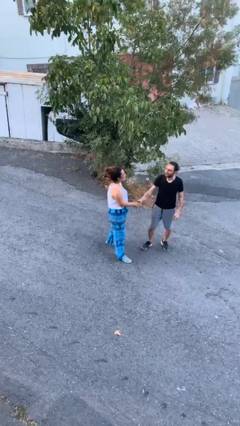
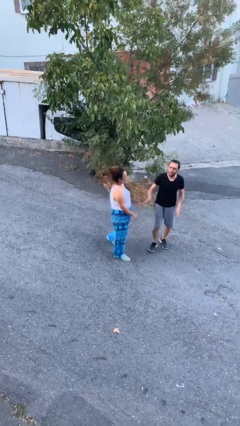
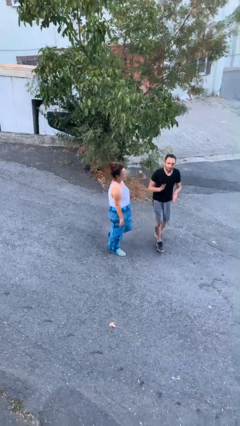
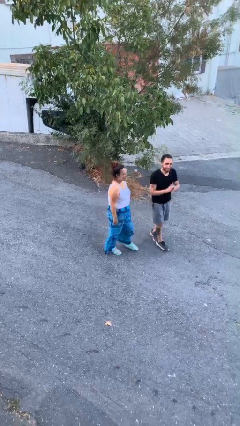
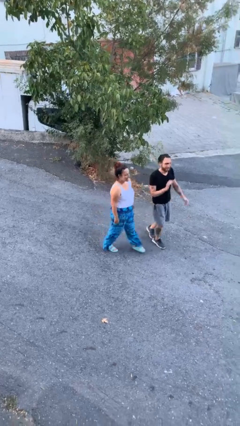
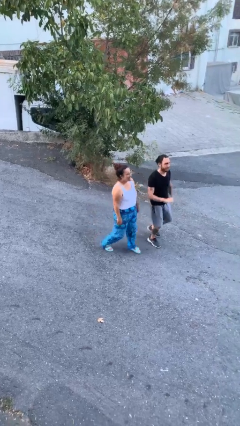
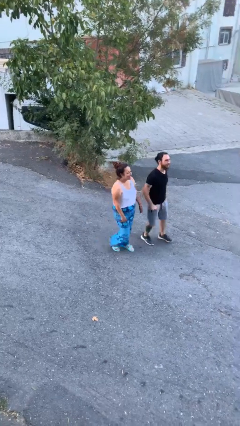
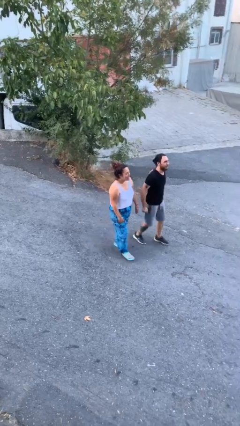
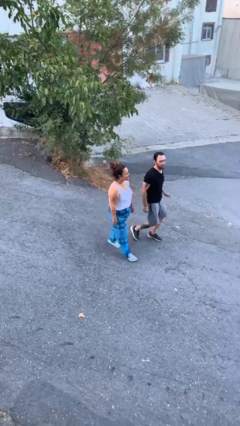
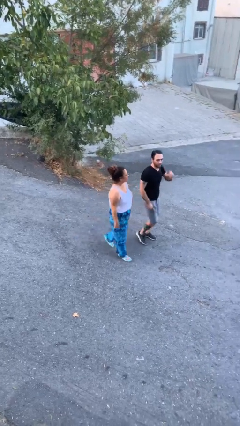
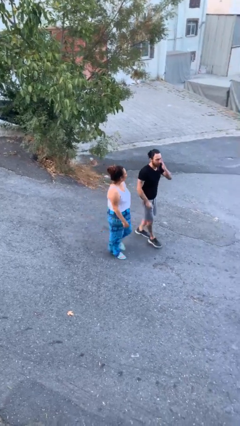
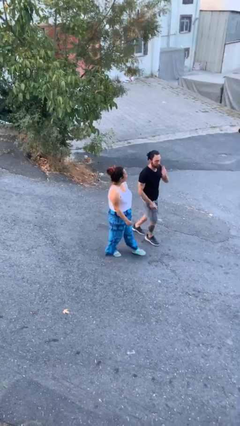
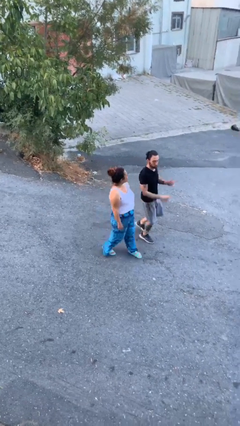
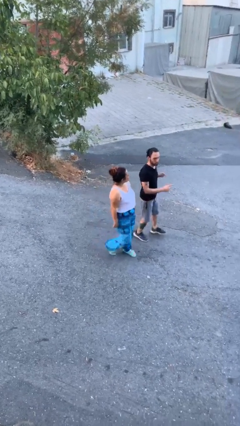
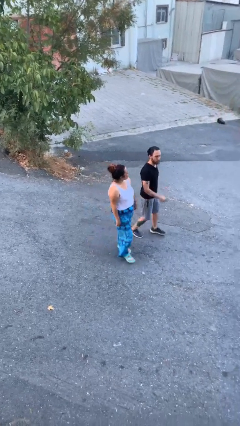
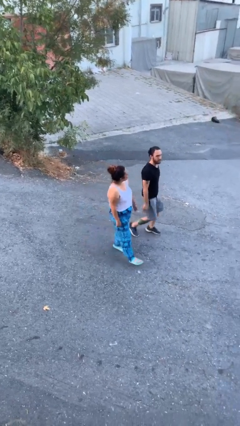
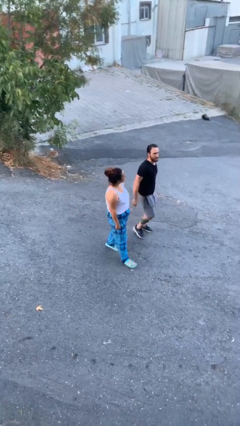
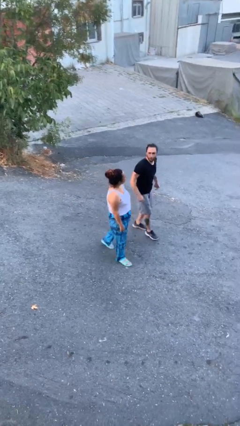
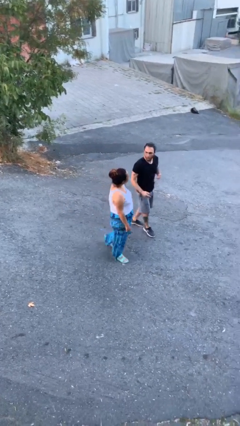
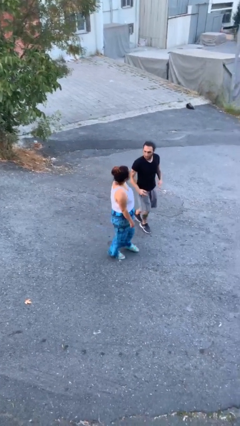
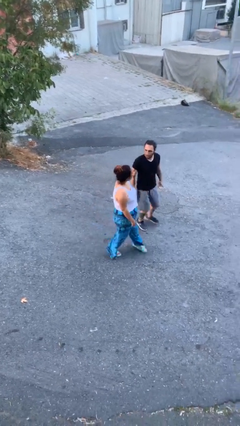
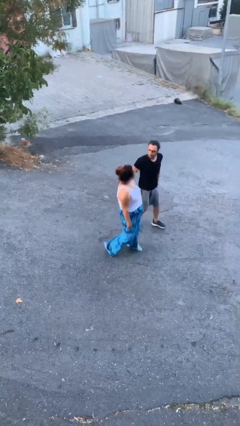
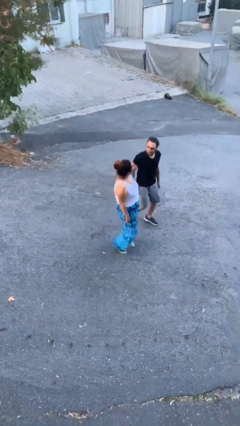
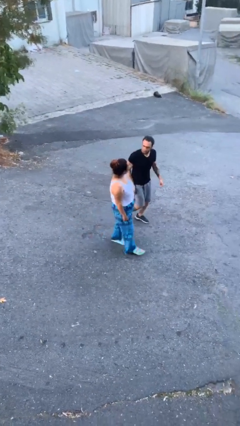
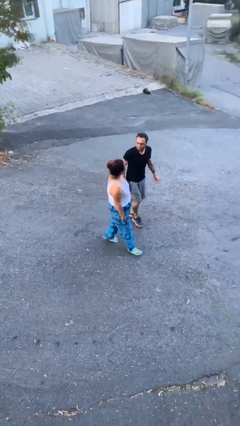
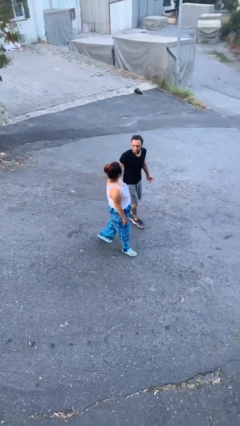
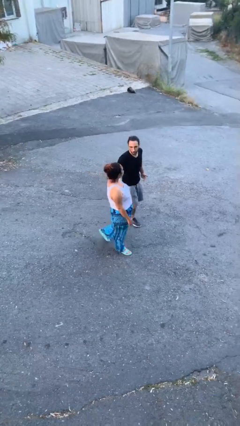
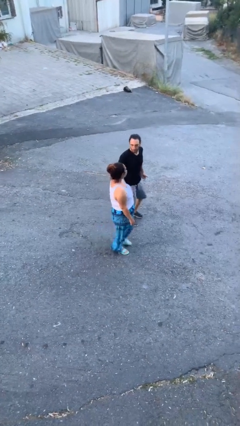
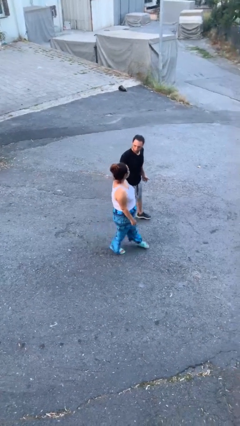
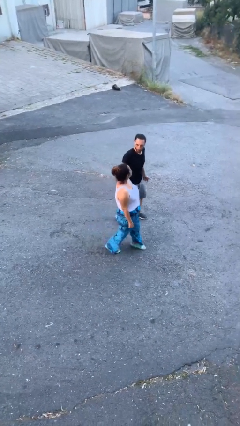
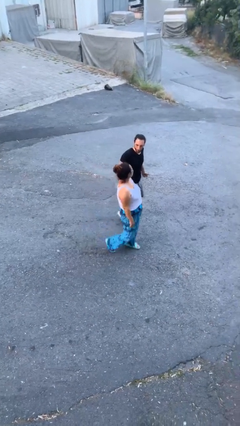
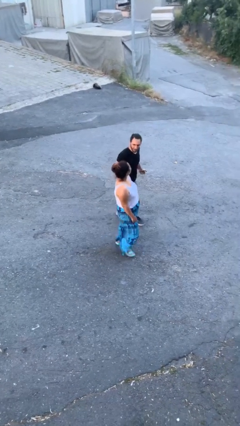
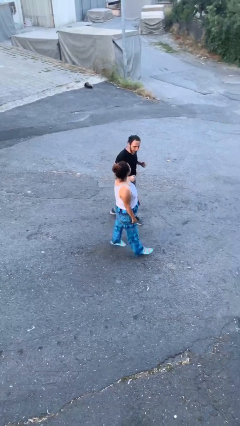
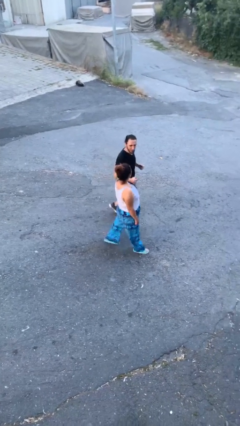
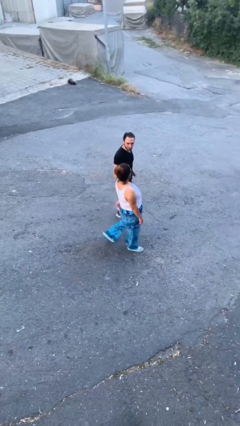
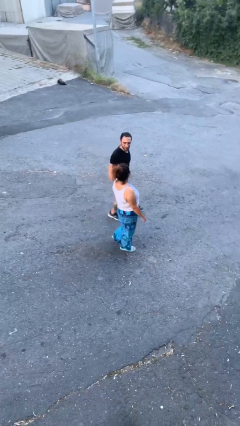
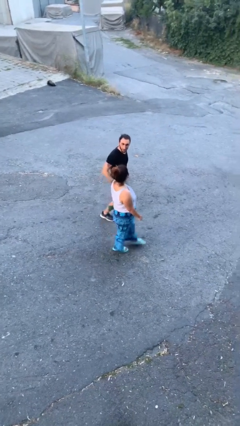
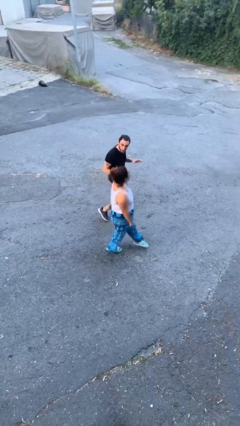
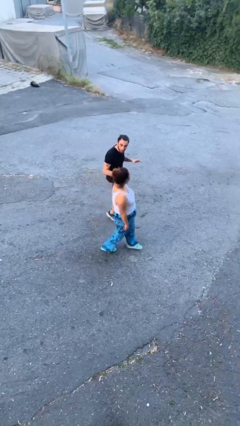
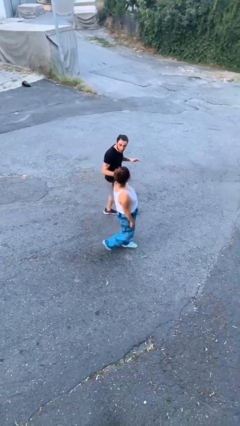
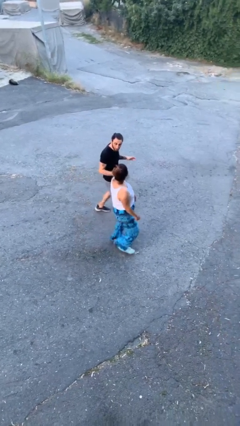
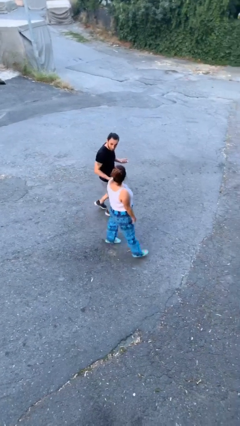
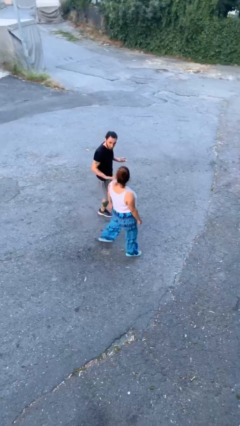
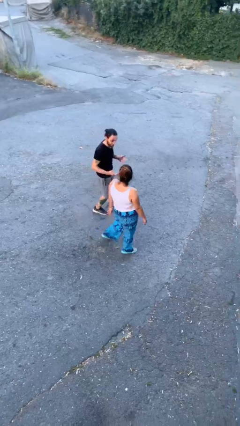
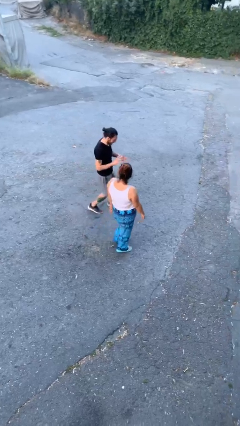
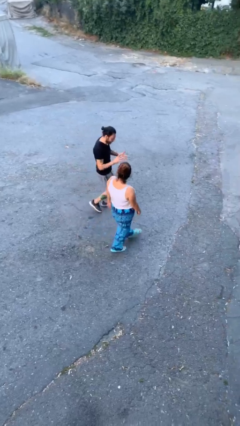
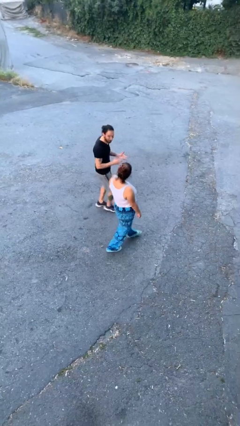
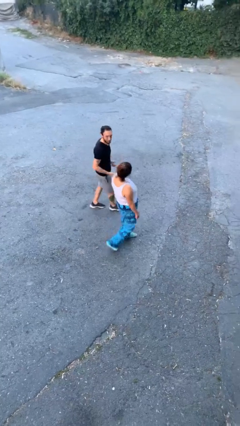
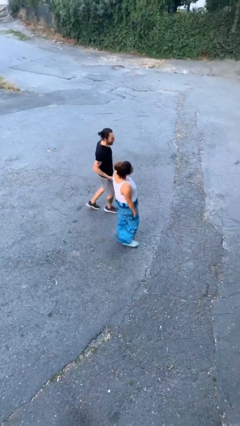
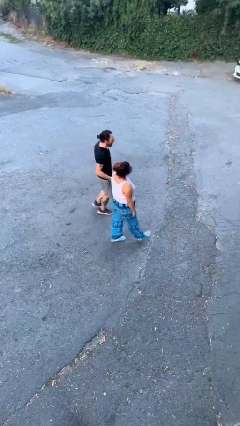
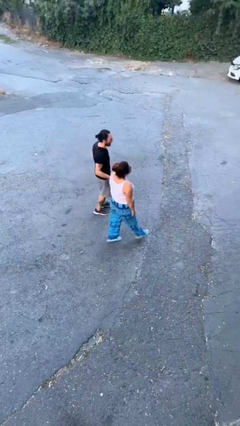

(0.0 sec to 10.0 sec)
person talks to person

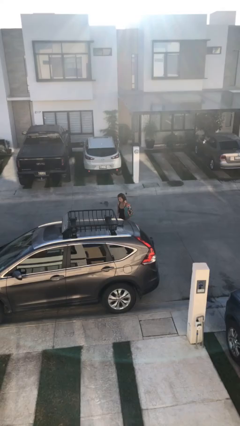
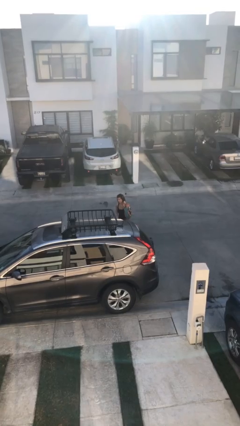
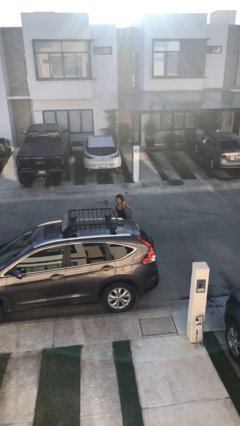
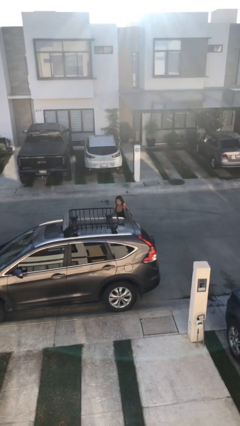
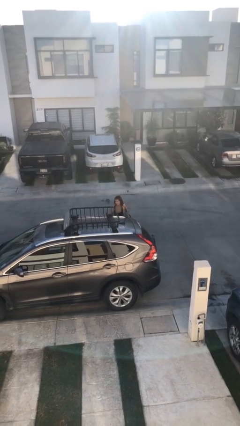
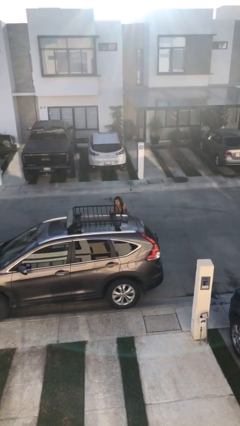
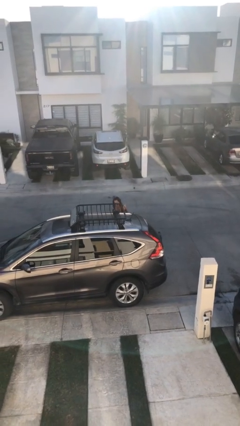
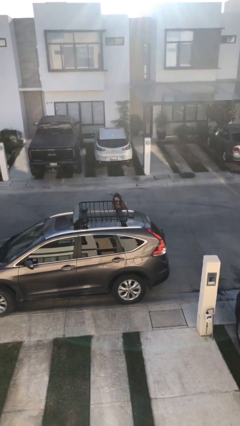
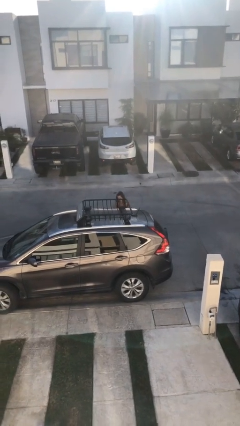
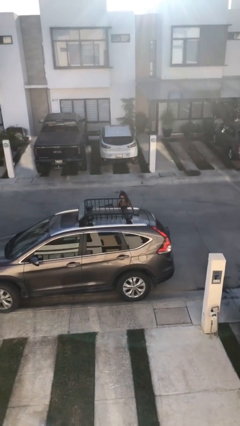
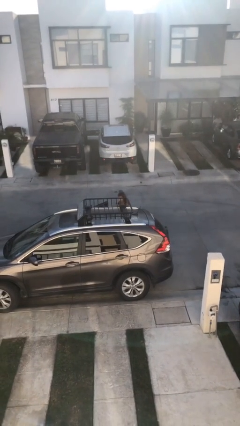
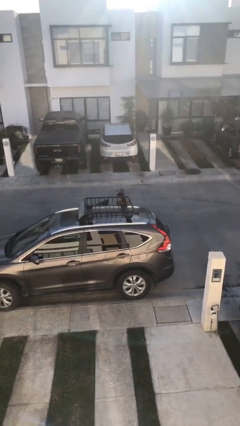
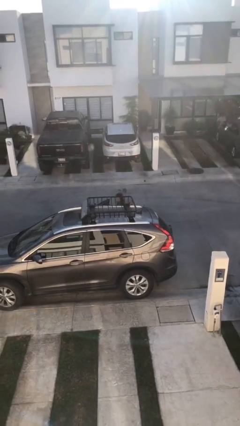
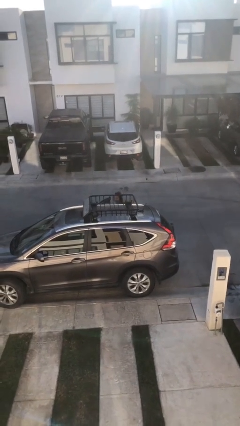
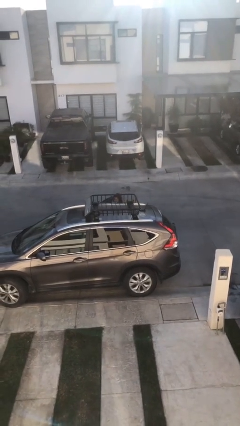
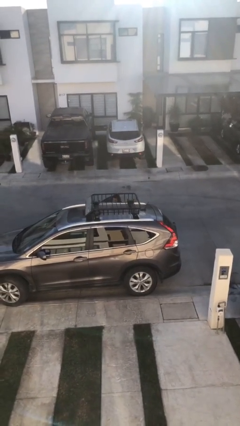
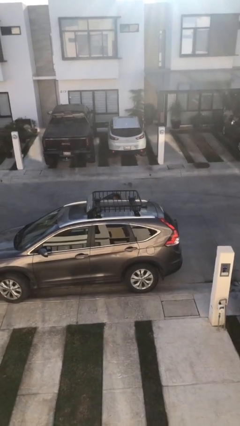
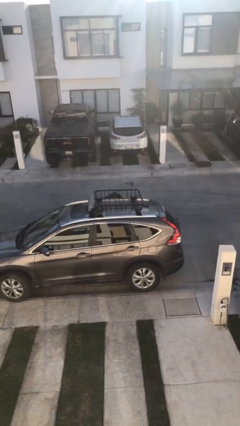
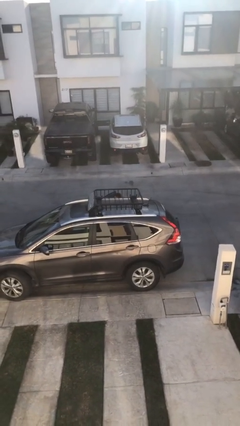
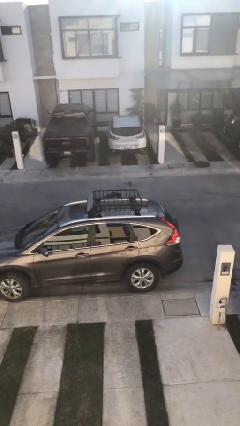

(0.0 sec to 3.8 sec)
person loads car

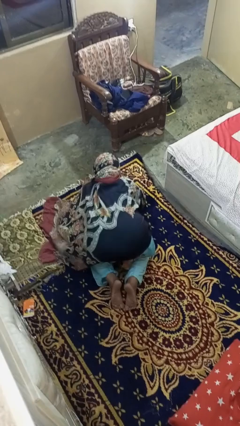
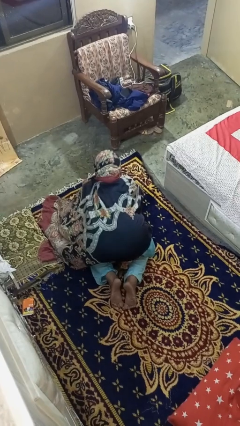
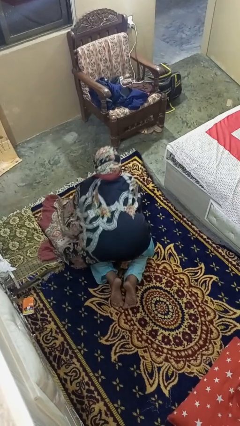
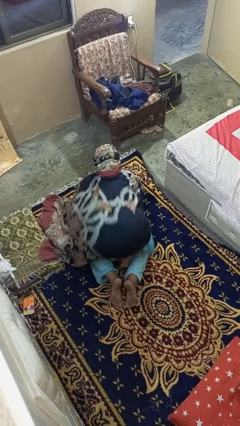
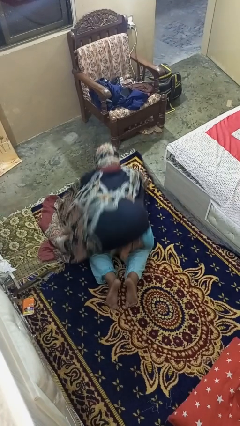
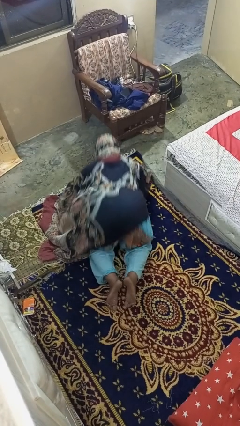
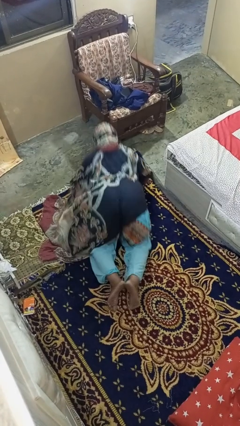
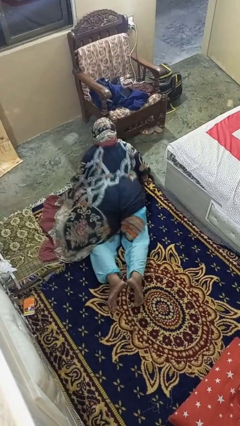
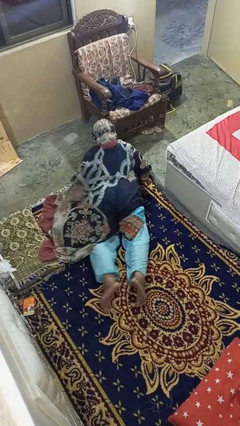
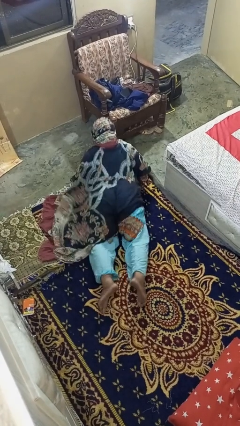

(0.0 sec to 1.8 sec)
person exercises with pushup

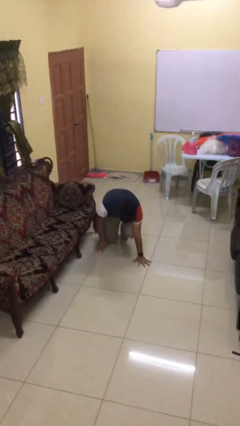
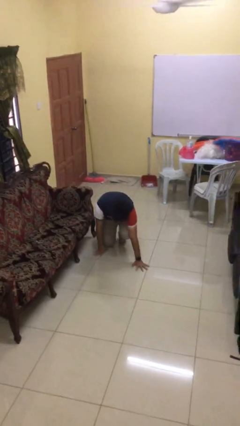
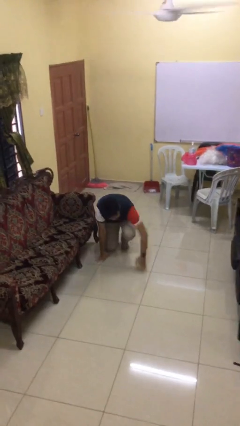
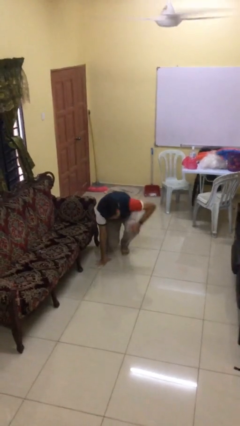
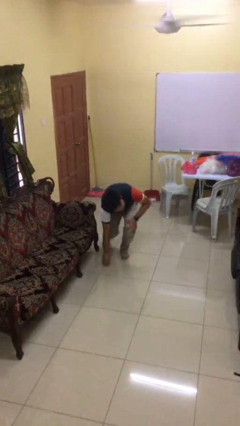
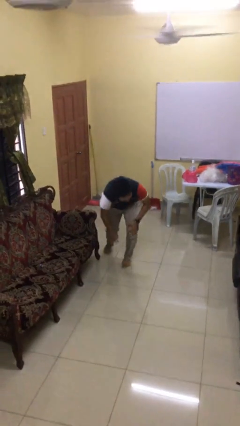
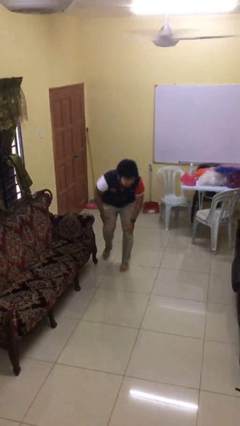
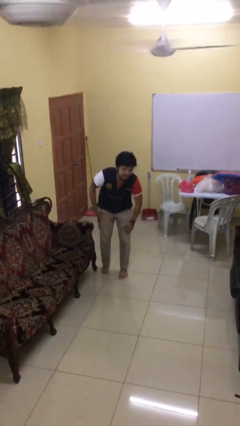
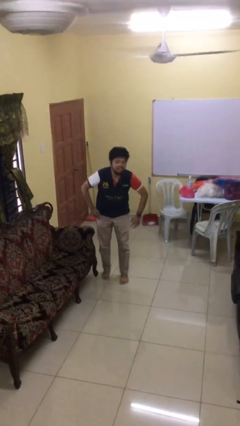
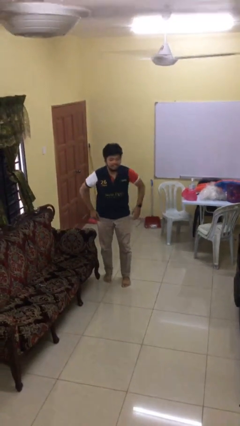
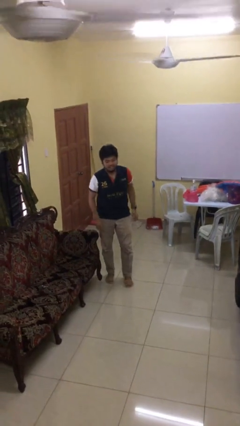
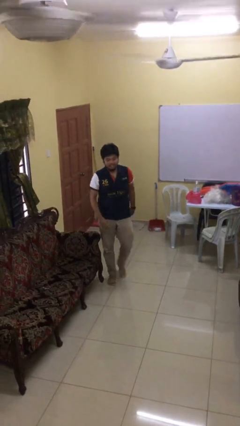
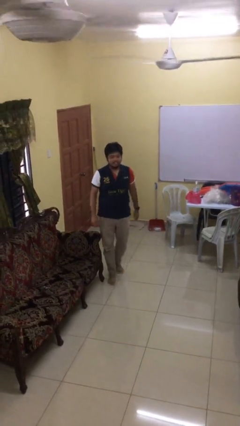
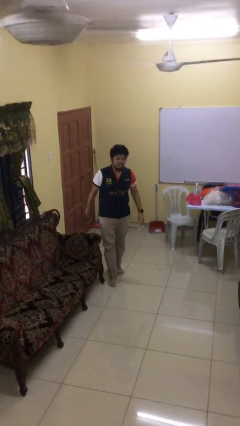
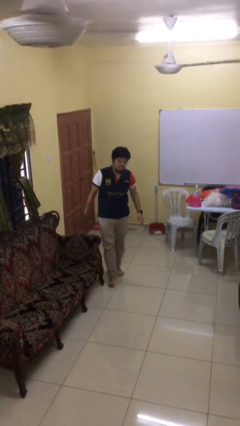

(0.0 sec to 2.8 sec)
person stands up from floor
